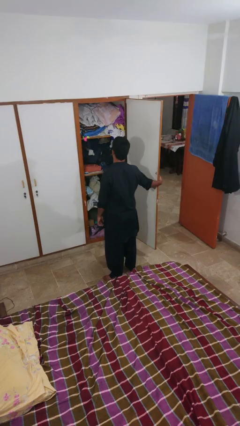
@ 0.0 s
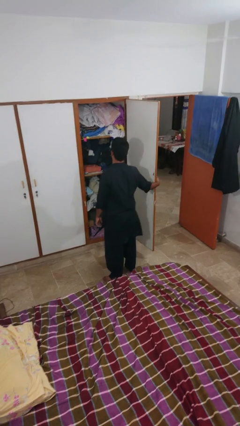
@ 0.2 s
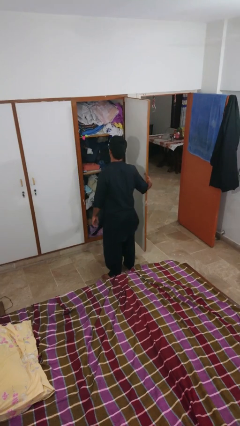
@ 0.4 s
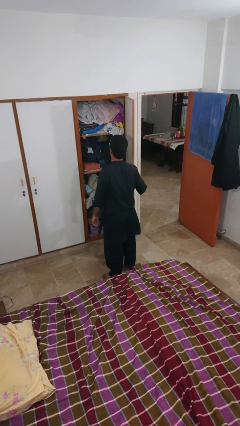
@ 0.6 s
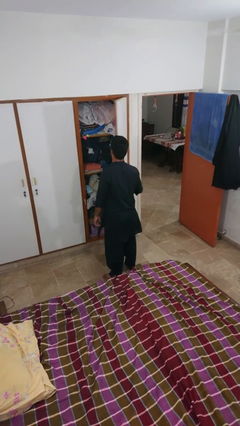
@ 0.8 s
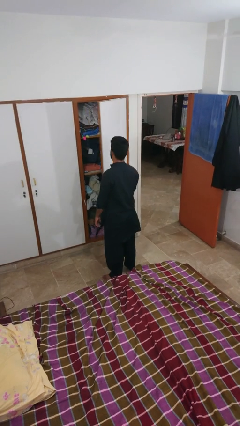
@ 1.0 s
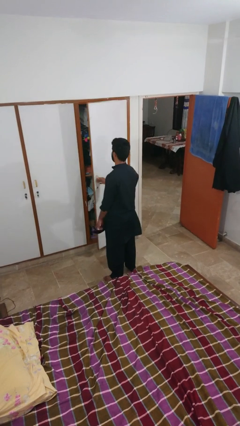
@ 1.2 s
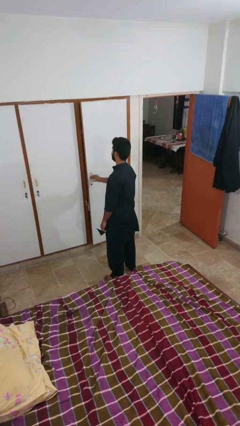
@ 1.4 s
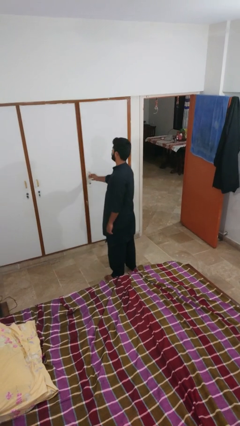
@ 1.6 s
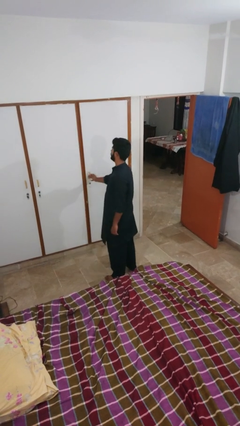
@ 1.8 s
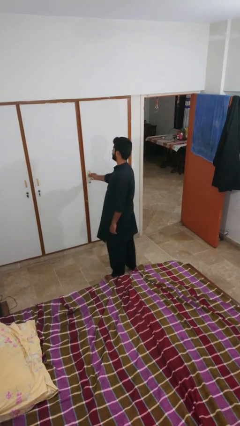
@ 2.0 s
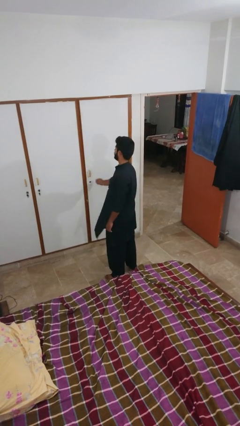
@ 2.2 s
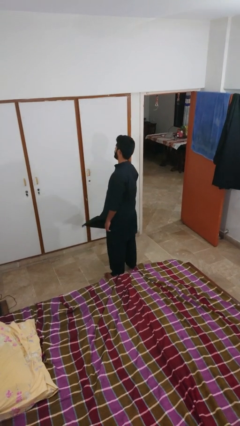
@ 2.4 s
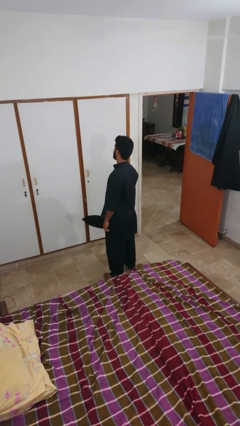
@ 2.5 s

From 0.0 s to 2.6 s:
person closes closet door

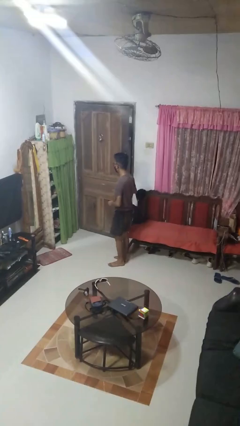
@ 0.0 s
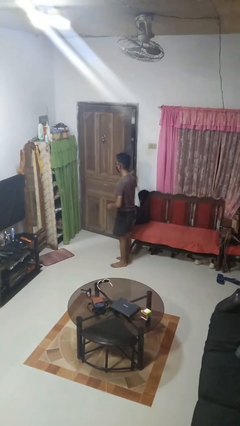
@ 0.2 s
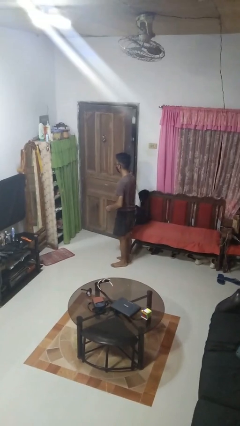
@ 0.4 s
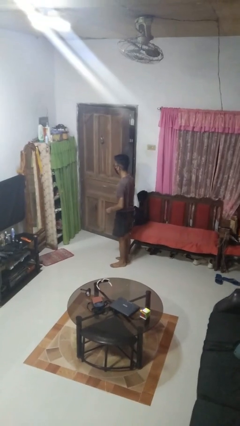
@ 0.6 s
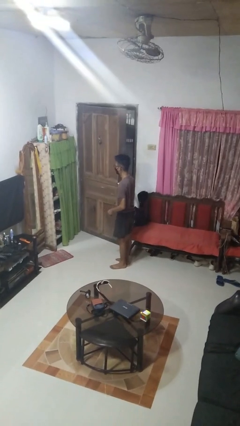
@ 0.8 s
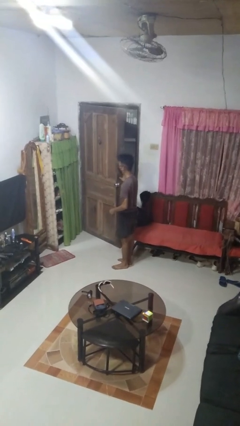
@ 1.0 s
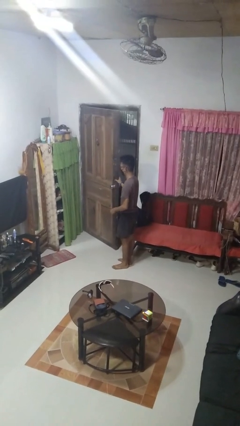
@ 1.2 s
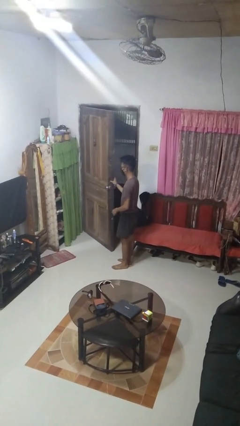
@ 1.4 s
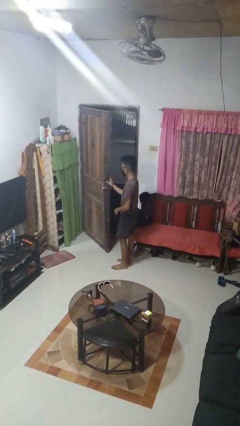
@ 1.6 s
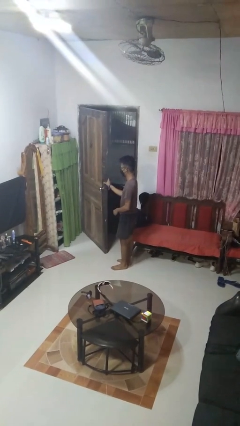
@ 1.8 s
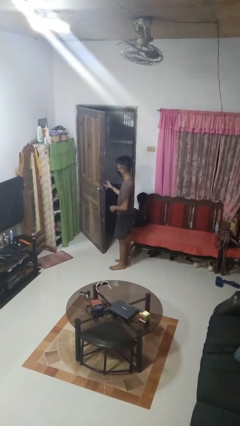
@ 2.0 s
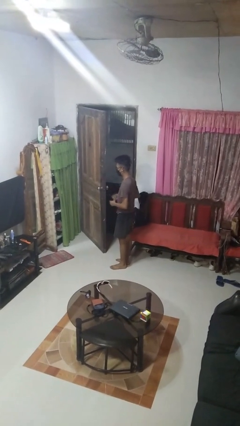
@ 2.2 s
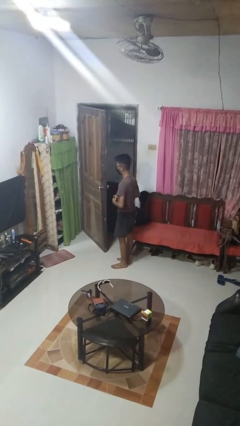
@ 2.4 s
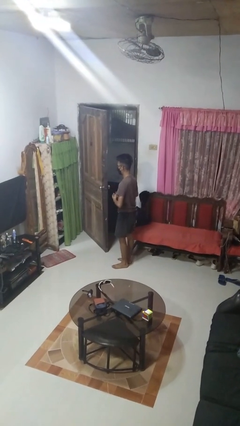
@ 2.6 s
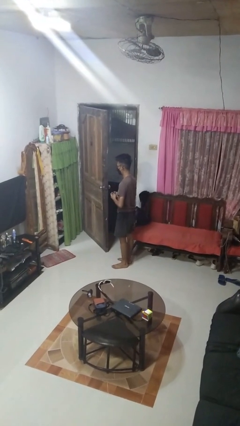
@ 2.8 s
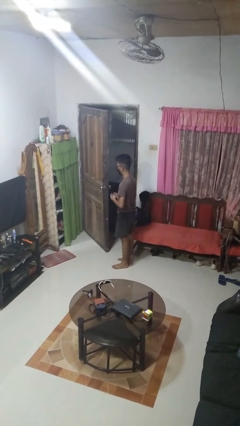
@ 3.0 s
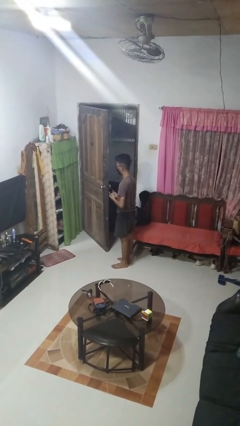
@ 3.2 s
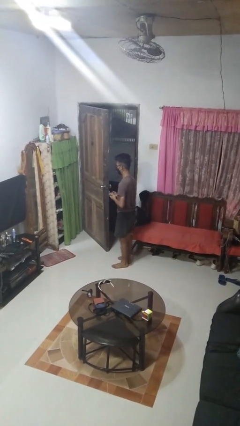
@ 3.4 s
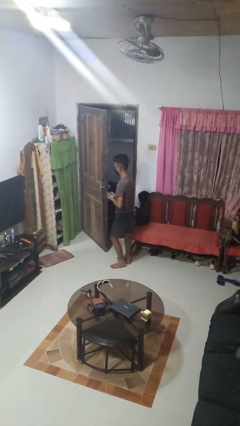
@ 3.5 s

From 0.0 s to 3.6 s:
person opens facility door

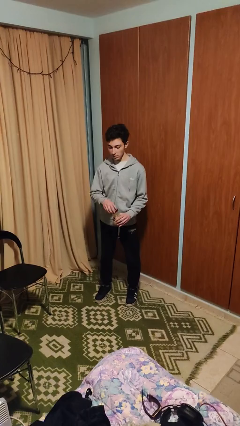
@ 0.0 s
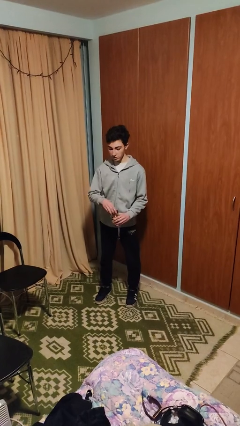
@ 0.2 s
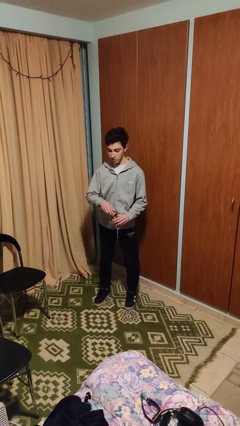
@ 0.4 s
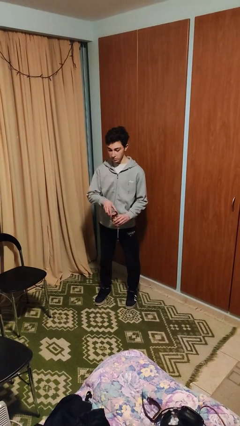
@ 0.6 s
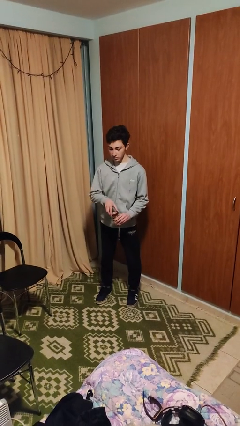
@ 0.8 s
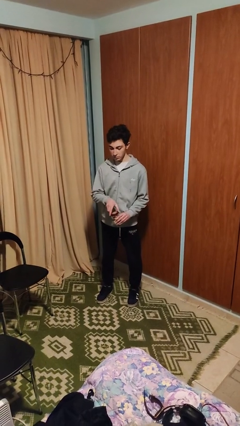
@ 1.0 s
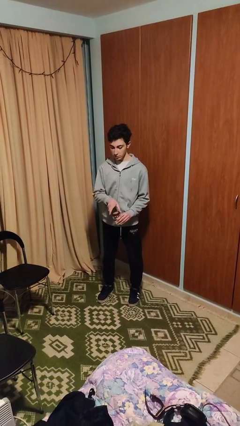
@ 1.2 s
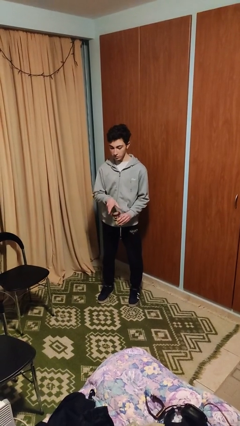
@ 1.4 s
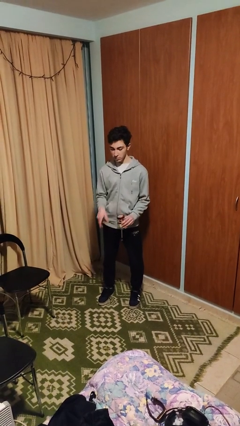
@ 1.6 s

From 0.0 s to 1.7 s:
person closes jar

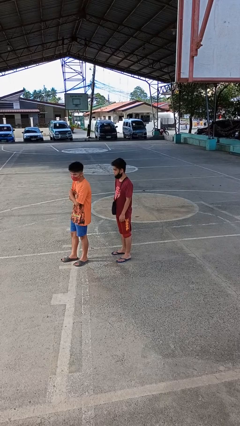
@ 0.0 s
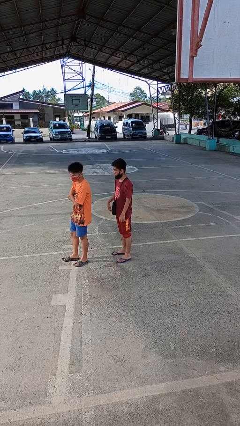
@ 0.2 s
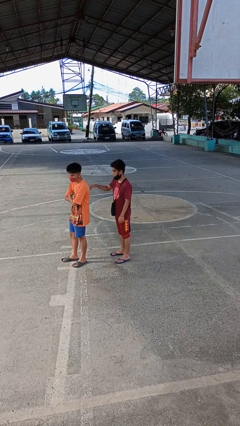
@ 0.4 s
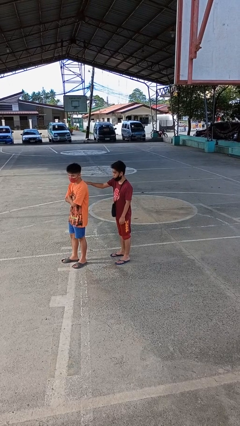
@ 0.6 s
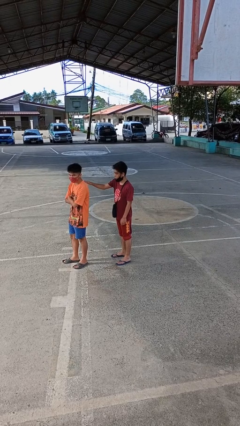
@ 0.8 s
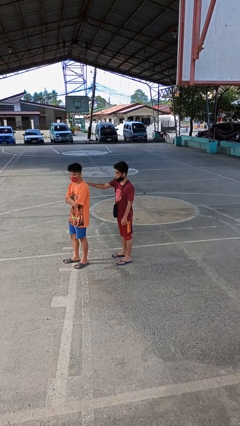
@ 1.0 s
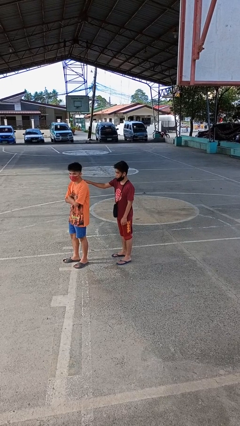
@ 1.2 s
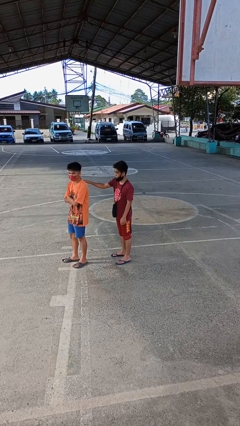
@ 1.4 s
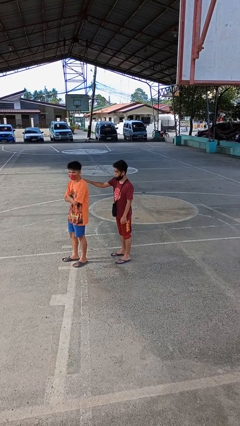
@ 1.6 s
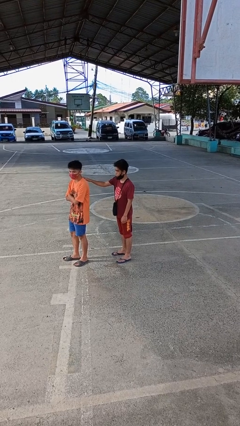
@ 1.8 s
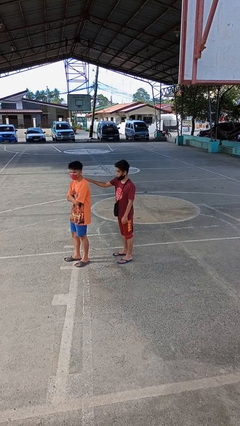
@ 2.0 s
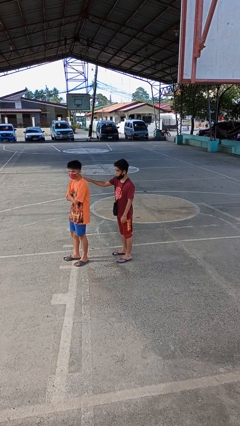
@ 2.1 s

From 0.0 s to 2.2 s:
person touches back of person

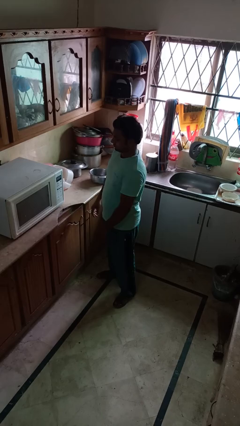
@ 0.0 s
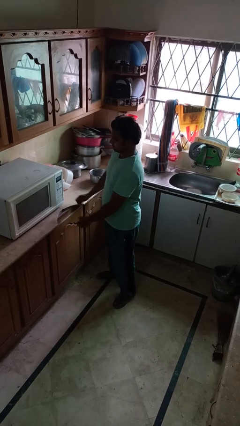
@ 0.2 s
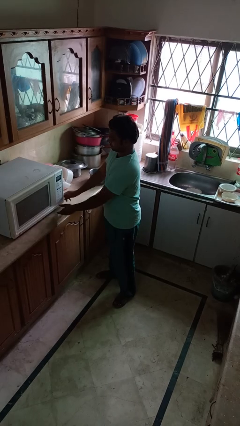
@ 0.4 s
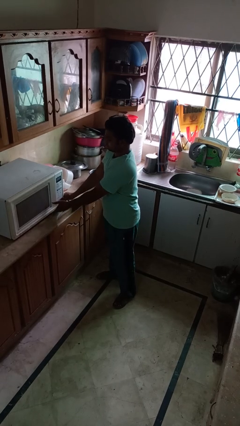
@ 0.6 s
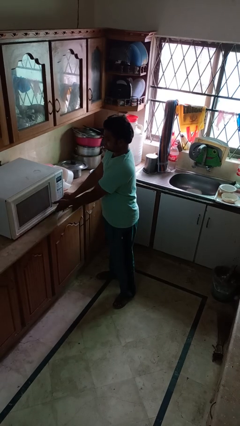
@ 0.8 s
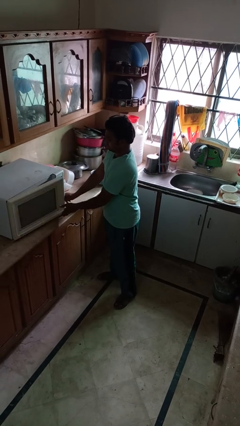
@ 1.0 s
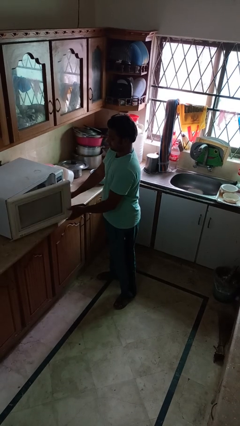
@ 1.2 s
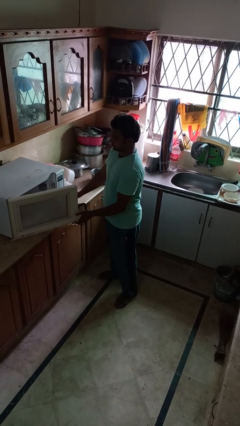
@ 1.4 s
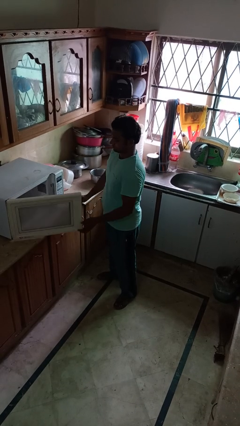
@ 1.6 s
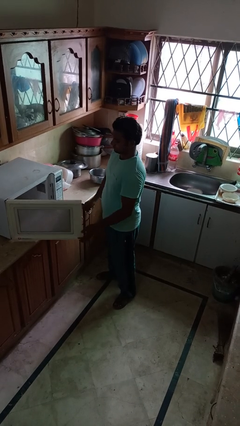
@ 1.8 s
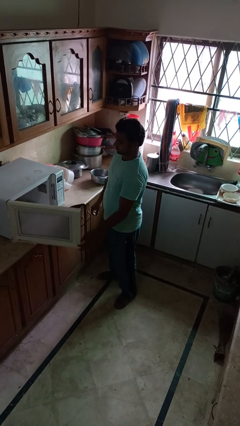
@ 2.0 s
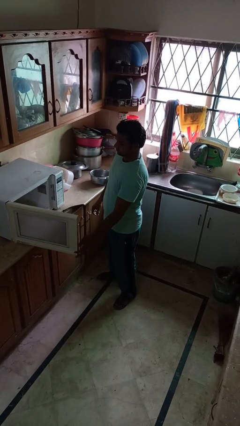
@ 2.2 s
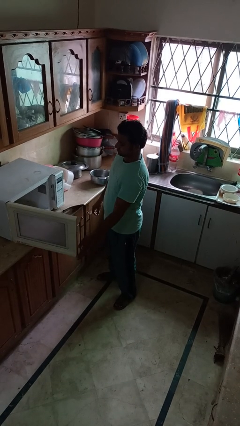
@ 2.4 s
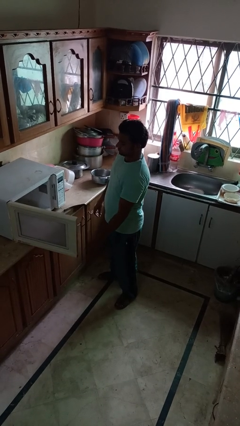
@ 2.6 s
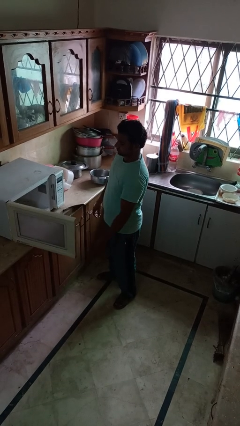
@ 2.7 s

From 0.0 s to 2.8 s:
person opens microwave

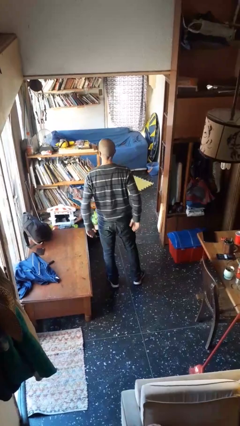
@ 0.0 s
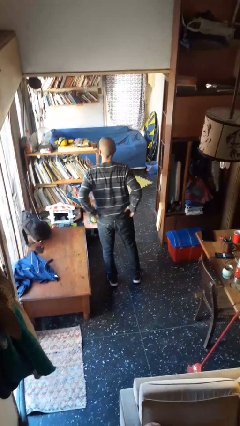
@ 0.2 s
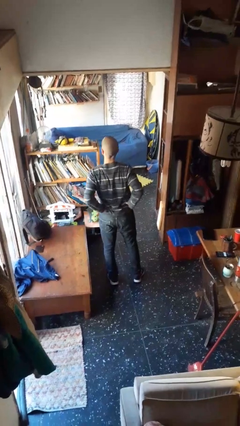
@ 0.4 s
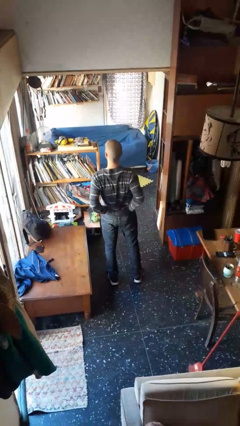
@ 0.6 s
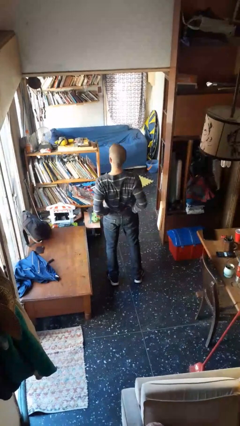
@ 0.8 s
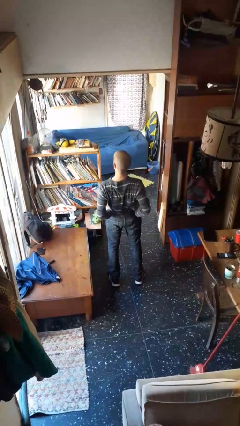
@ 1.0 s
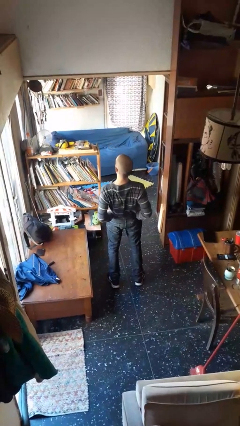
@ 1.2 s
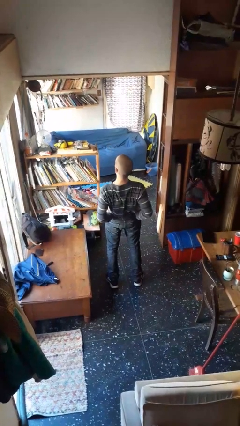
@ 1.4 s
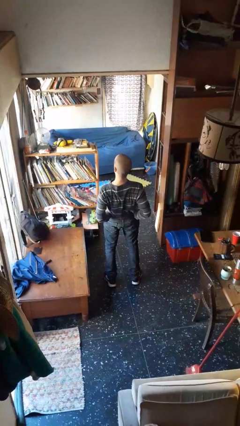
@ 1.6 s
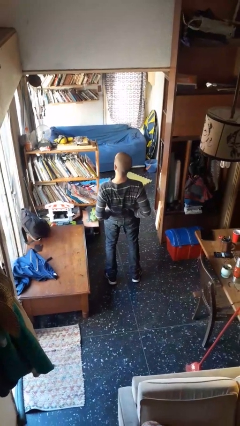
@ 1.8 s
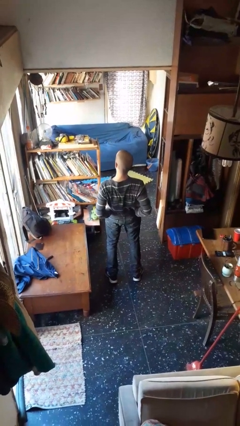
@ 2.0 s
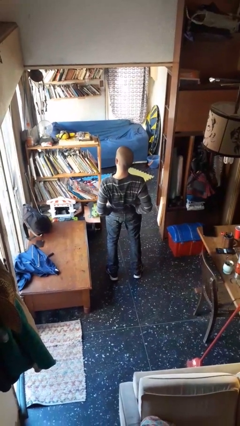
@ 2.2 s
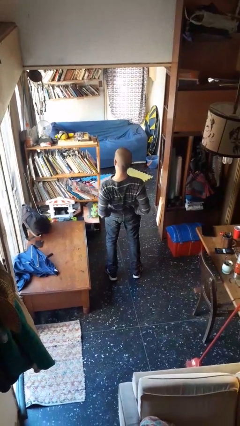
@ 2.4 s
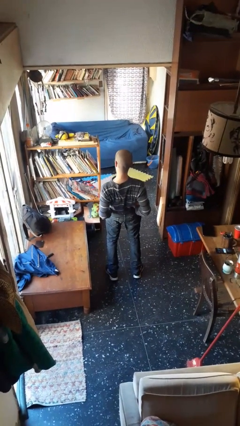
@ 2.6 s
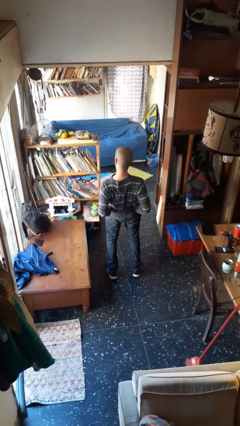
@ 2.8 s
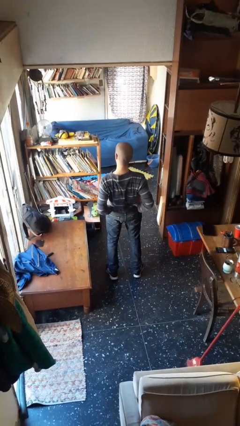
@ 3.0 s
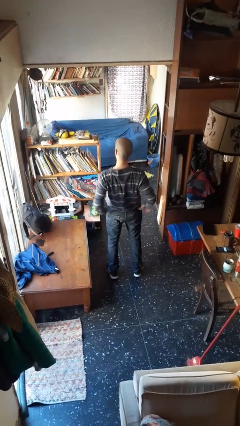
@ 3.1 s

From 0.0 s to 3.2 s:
person stretches back

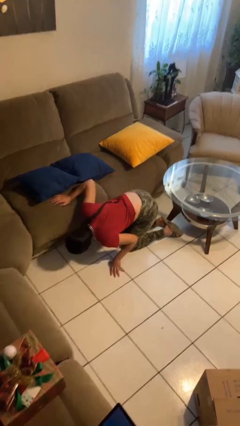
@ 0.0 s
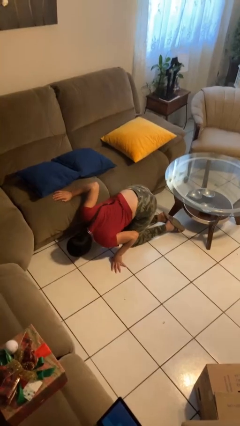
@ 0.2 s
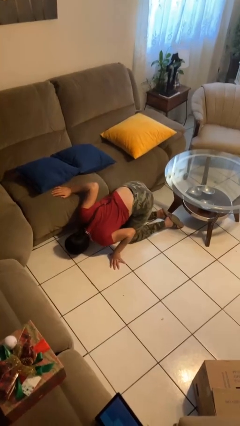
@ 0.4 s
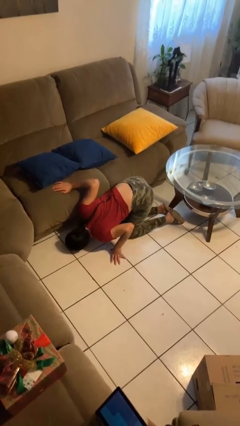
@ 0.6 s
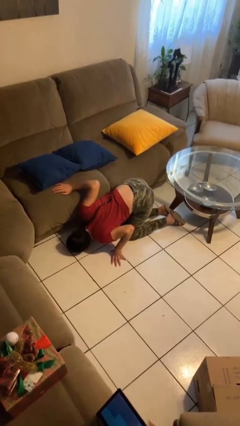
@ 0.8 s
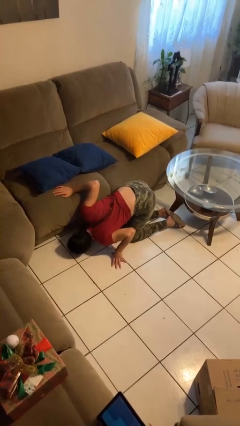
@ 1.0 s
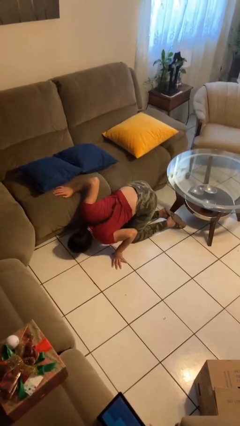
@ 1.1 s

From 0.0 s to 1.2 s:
person searches under couch
